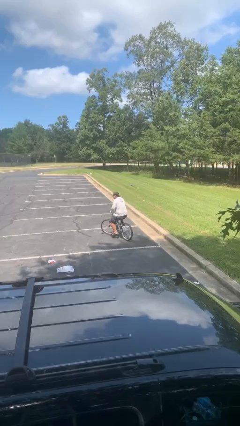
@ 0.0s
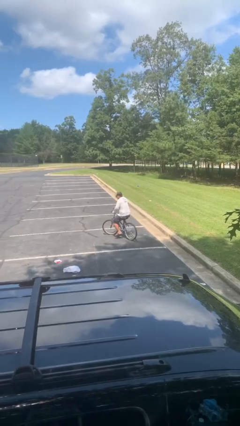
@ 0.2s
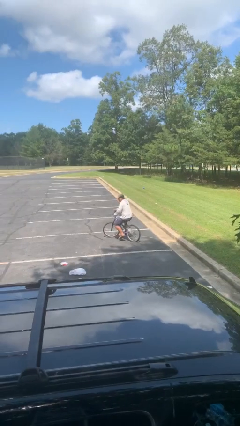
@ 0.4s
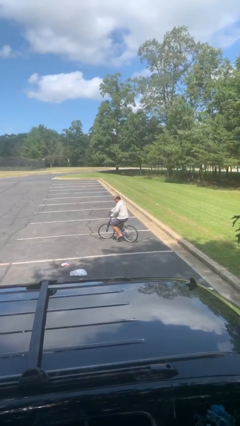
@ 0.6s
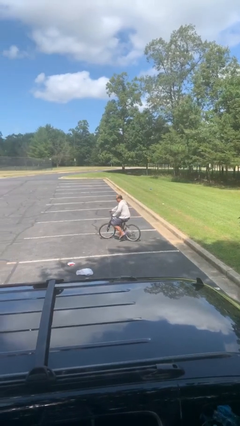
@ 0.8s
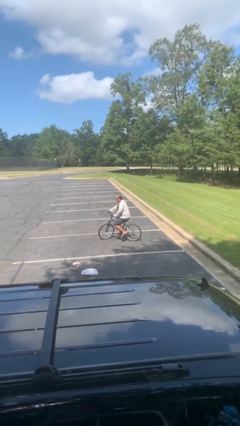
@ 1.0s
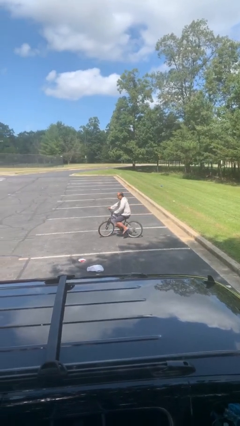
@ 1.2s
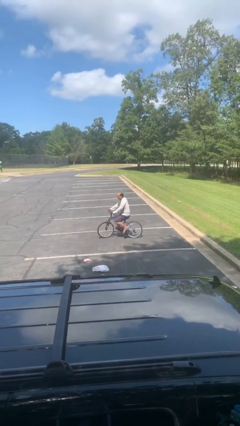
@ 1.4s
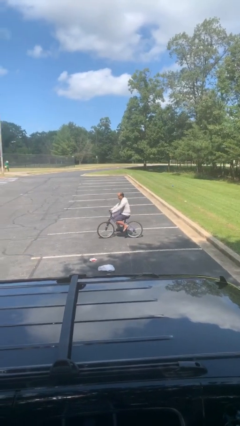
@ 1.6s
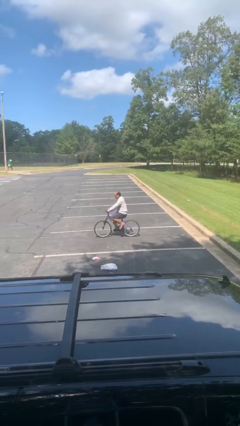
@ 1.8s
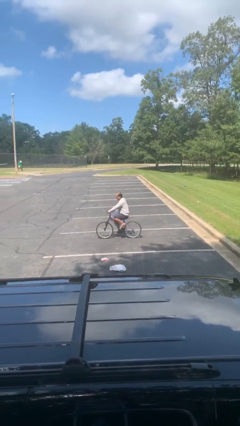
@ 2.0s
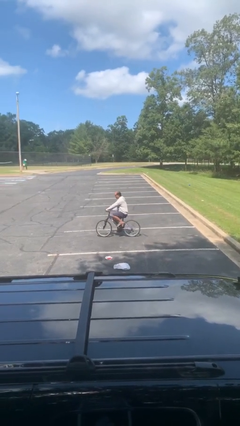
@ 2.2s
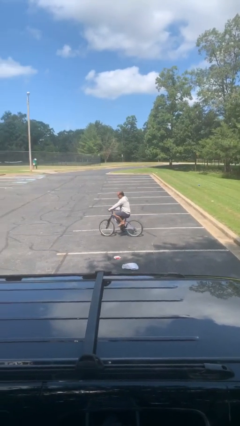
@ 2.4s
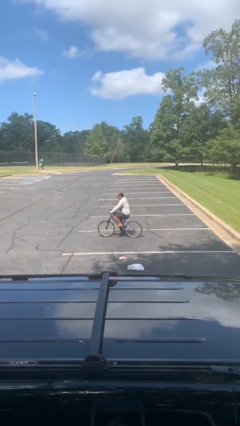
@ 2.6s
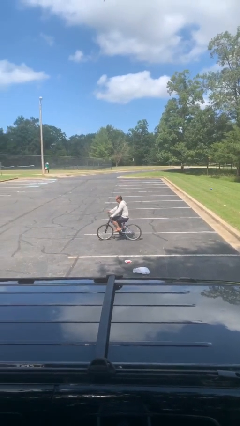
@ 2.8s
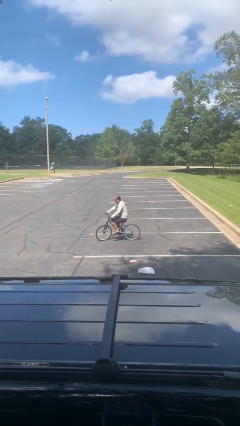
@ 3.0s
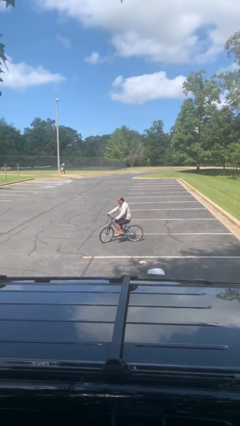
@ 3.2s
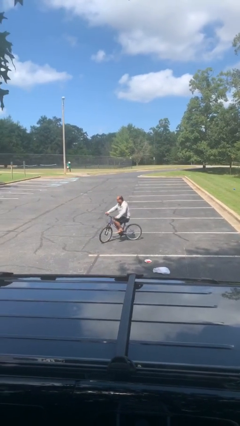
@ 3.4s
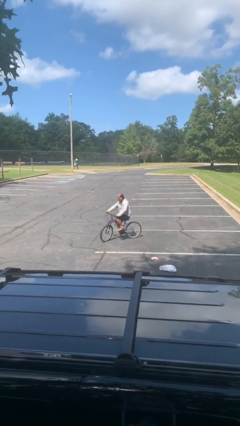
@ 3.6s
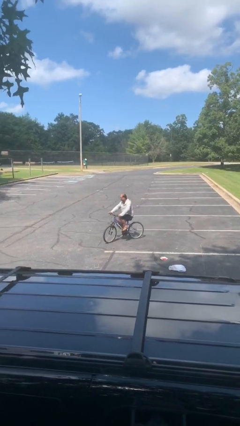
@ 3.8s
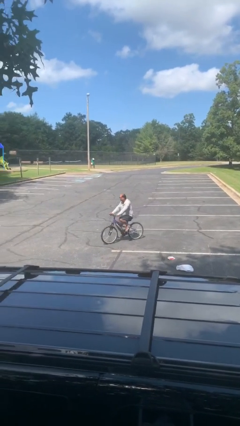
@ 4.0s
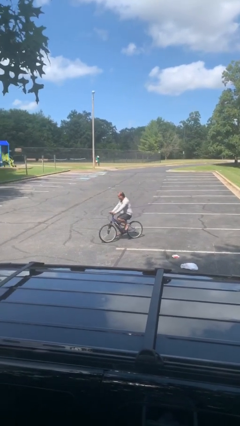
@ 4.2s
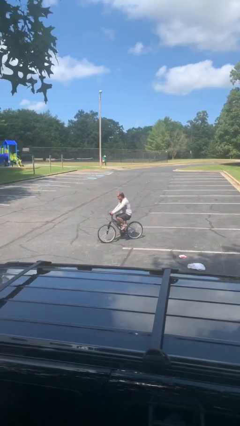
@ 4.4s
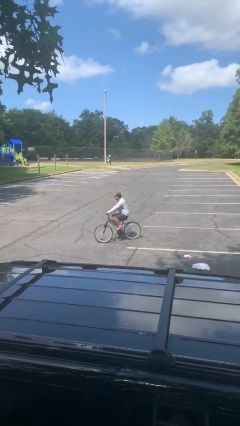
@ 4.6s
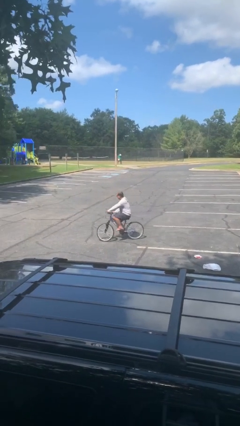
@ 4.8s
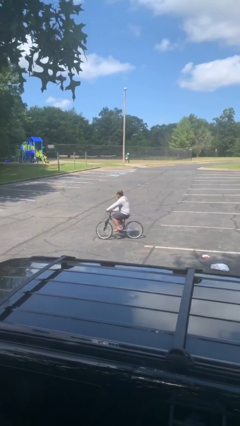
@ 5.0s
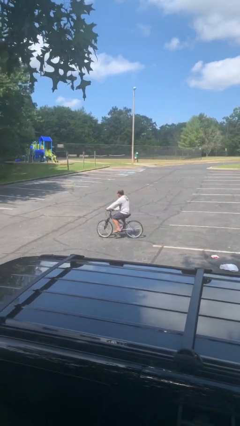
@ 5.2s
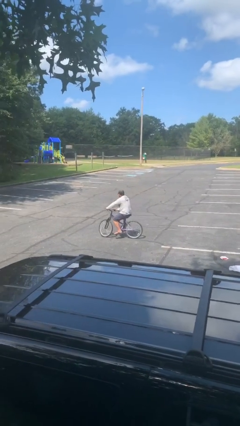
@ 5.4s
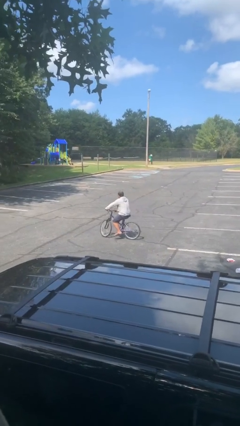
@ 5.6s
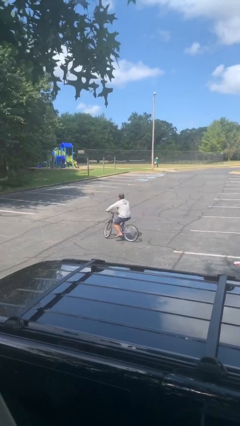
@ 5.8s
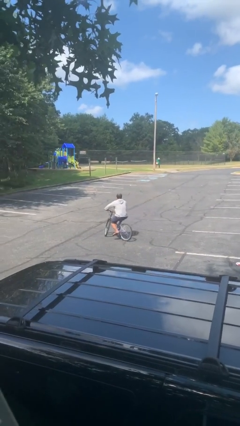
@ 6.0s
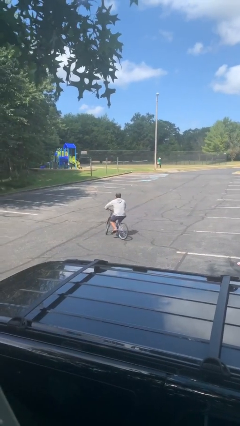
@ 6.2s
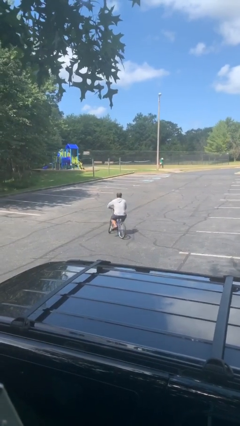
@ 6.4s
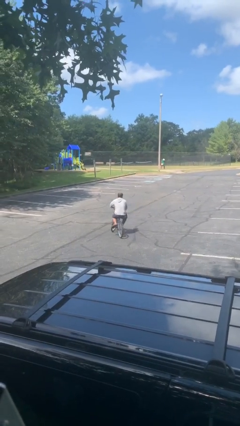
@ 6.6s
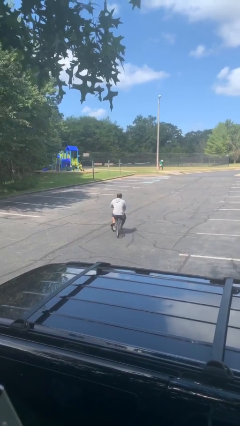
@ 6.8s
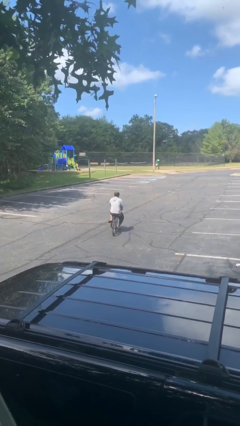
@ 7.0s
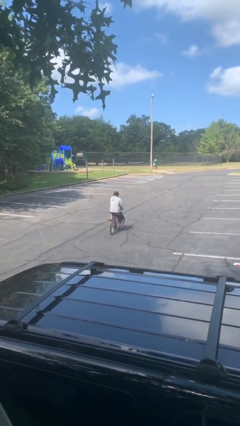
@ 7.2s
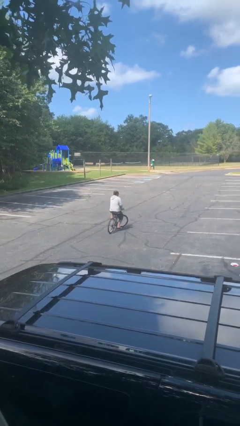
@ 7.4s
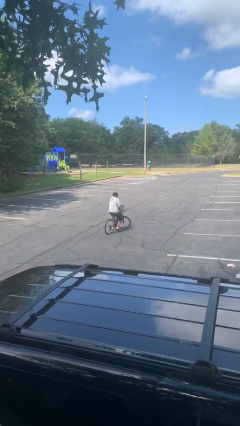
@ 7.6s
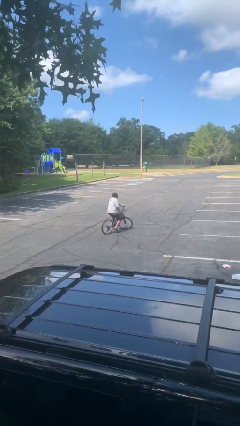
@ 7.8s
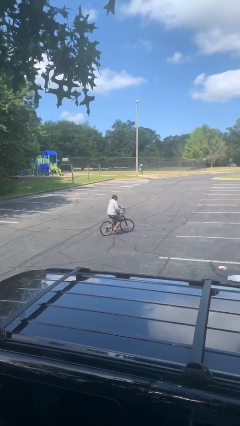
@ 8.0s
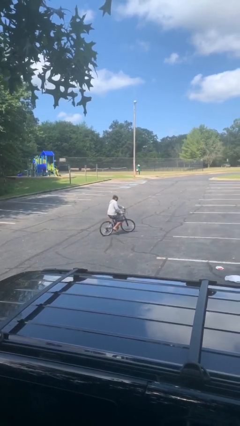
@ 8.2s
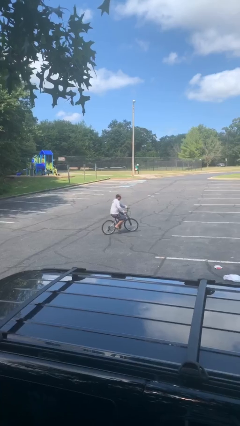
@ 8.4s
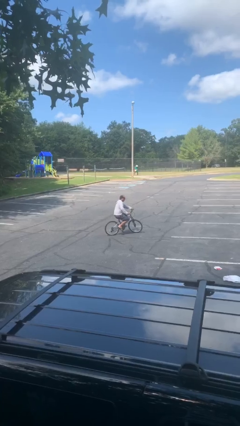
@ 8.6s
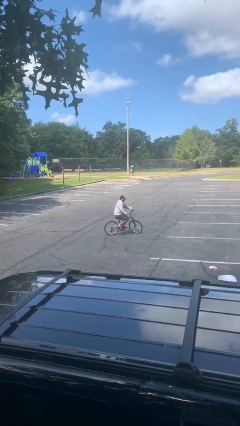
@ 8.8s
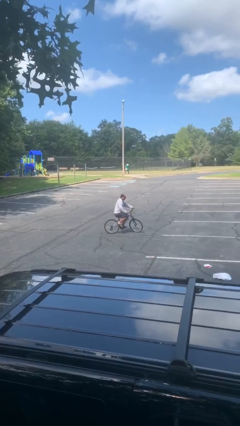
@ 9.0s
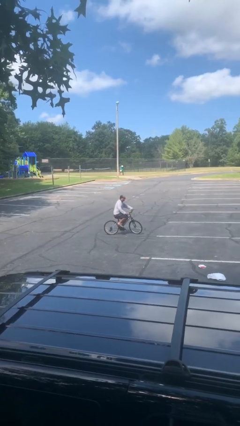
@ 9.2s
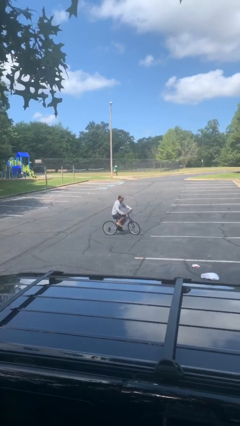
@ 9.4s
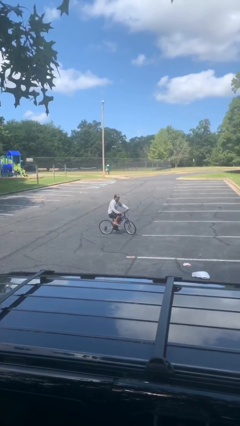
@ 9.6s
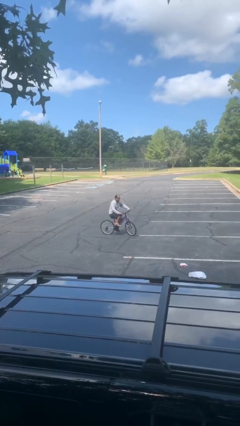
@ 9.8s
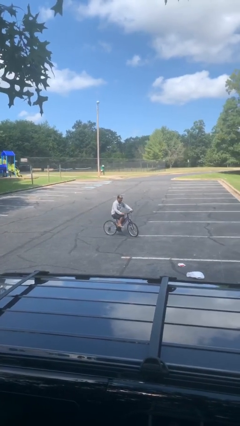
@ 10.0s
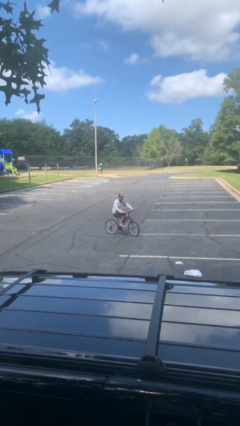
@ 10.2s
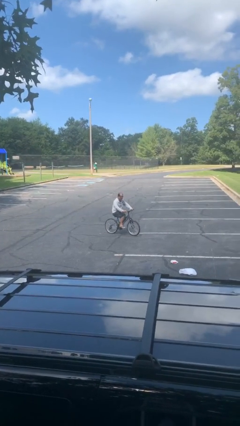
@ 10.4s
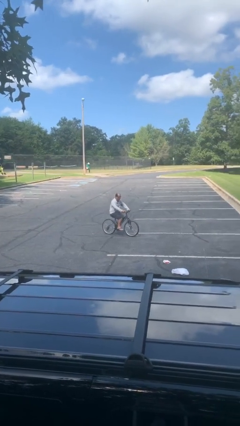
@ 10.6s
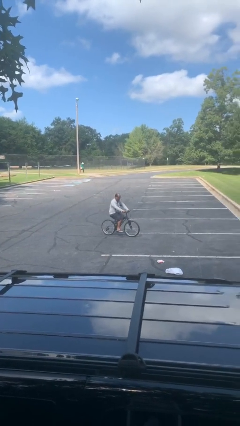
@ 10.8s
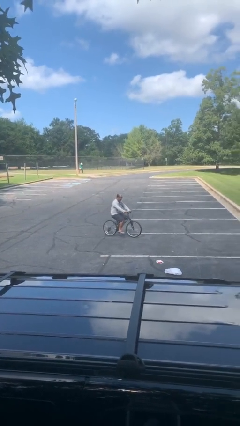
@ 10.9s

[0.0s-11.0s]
person rides bicycle

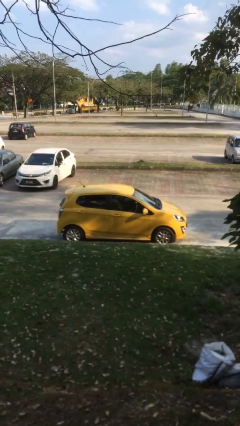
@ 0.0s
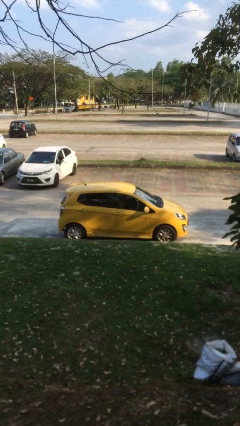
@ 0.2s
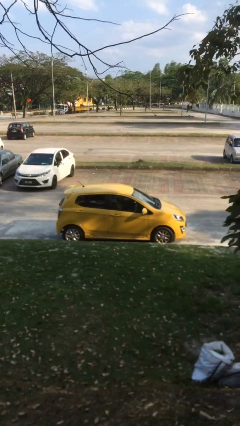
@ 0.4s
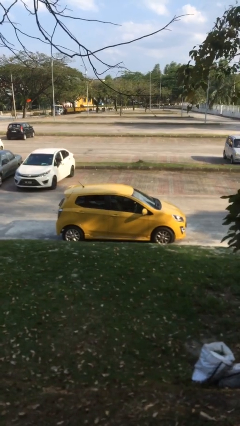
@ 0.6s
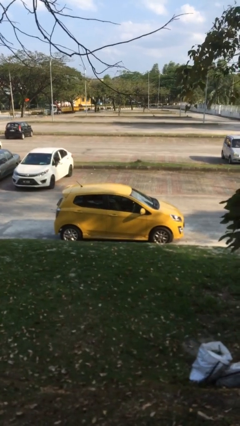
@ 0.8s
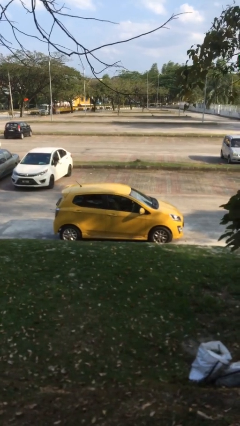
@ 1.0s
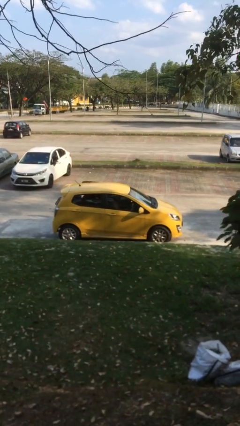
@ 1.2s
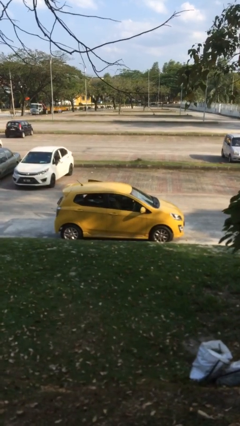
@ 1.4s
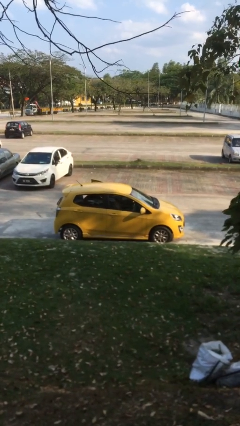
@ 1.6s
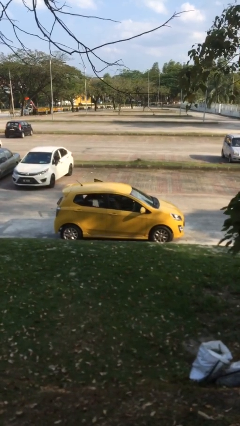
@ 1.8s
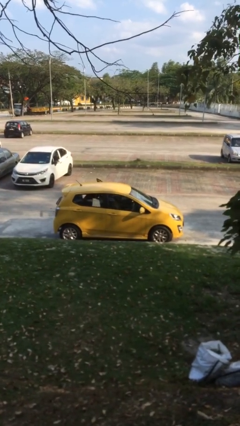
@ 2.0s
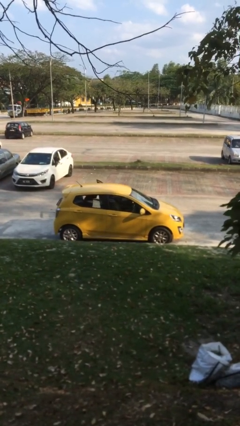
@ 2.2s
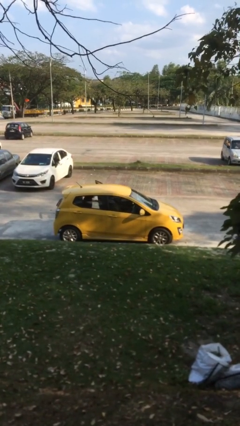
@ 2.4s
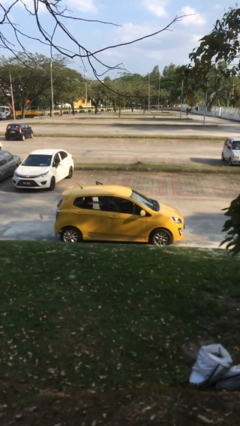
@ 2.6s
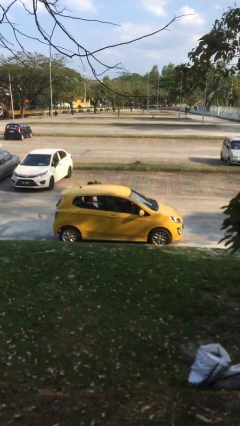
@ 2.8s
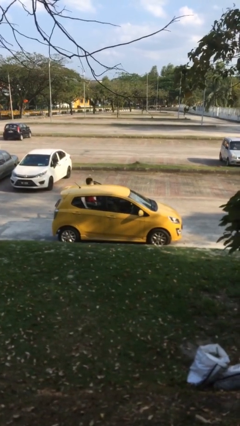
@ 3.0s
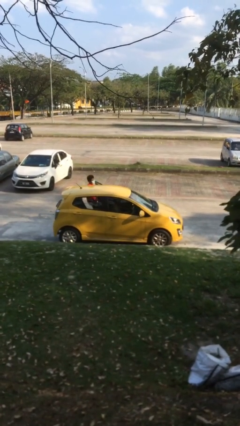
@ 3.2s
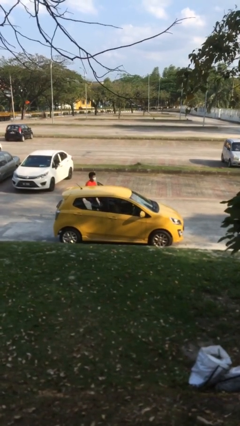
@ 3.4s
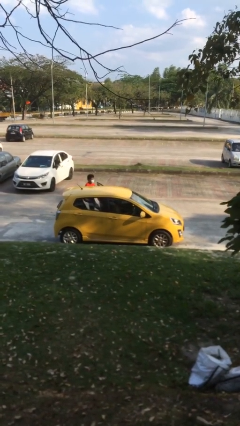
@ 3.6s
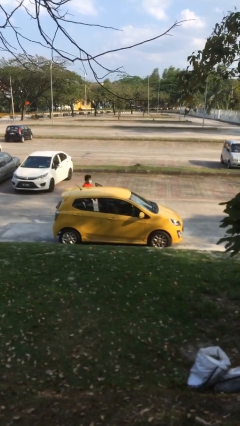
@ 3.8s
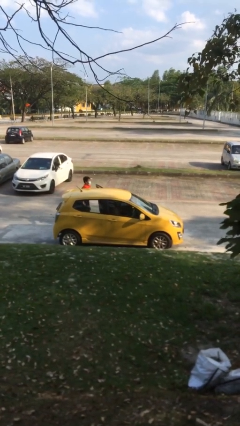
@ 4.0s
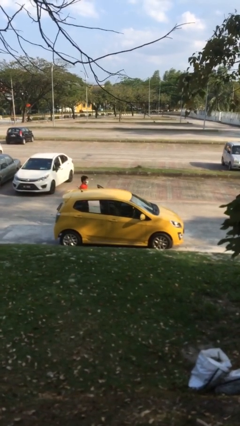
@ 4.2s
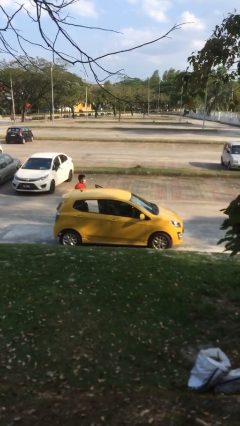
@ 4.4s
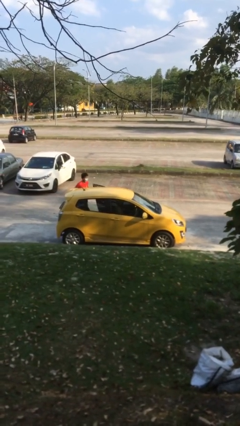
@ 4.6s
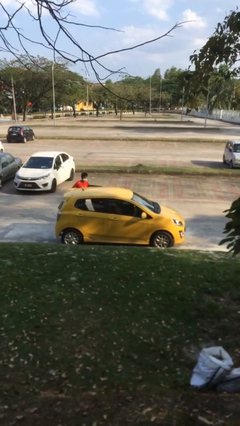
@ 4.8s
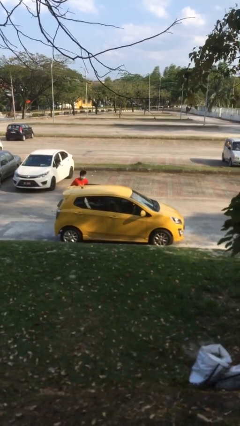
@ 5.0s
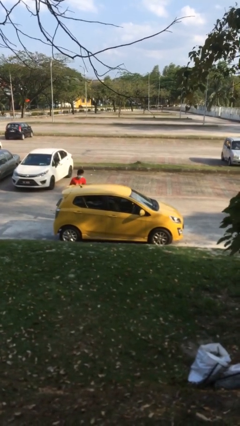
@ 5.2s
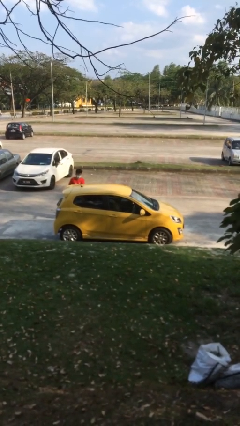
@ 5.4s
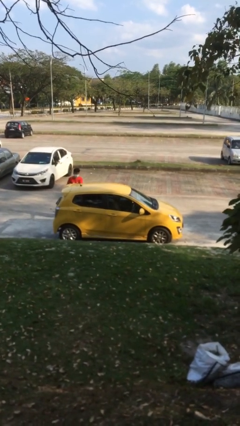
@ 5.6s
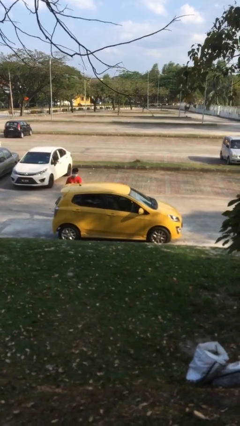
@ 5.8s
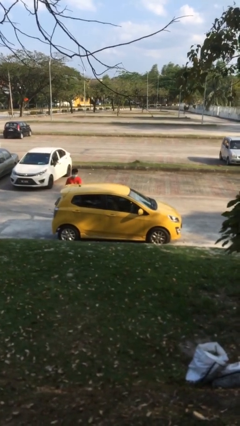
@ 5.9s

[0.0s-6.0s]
car drops off person

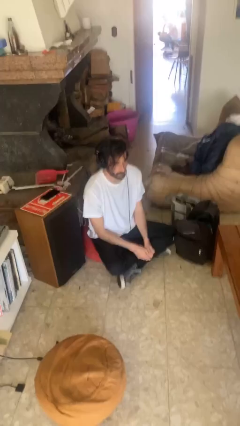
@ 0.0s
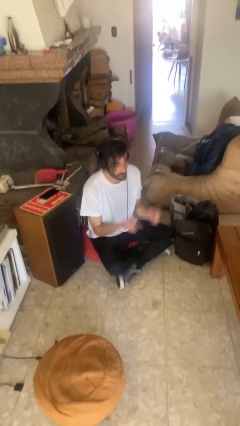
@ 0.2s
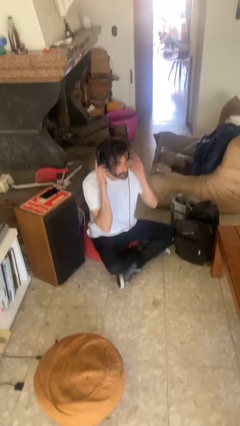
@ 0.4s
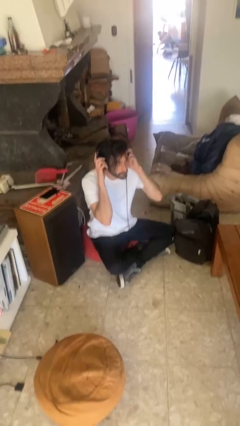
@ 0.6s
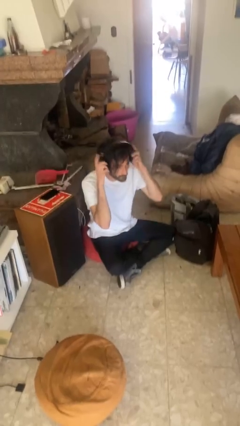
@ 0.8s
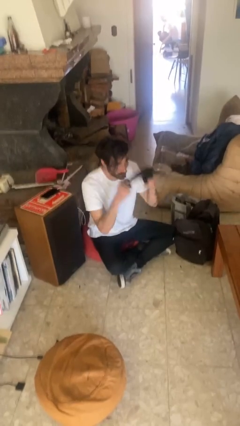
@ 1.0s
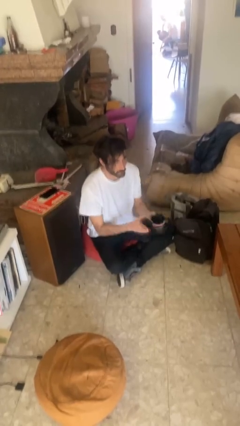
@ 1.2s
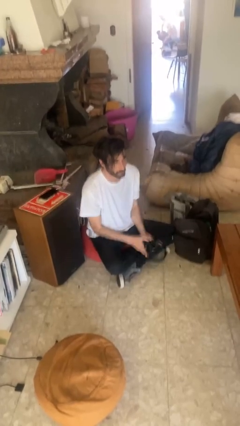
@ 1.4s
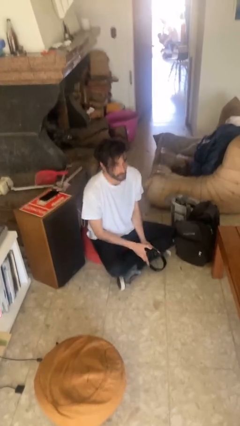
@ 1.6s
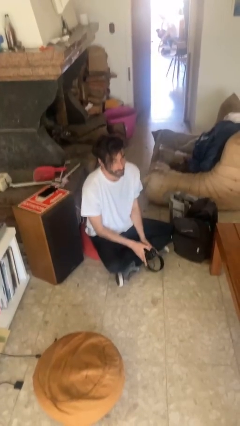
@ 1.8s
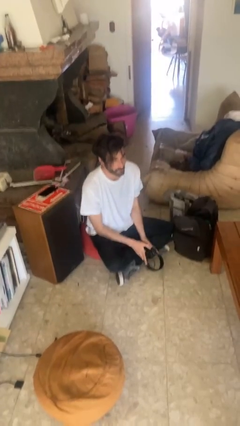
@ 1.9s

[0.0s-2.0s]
person takes off headphones
